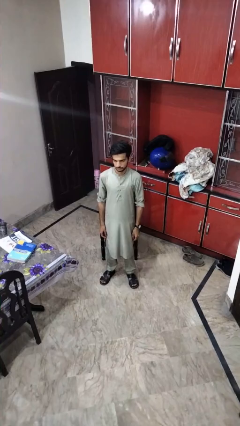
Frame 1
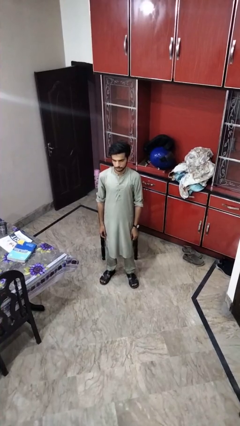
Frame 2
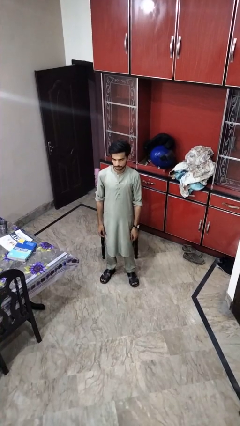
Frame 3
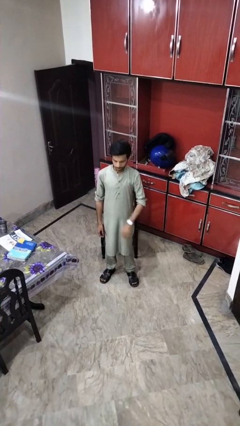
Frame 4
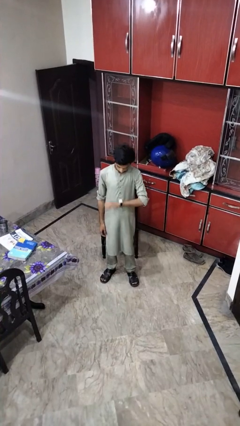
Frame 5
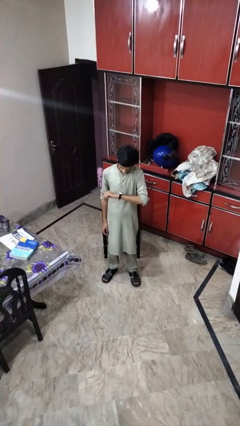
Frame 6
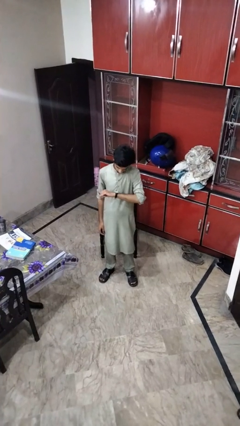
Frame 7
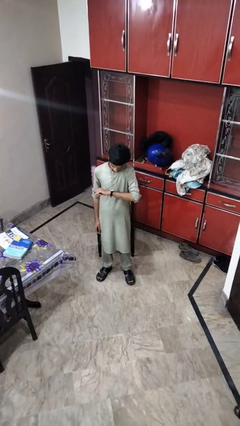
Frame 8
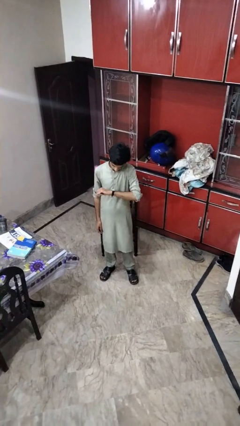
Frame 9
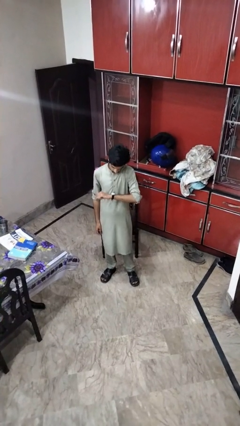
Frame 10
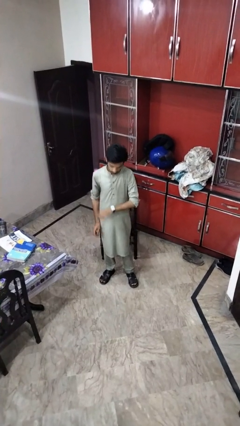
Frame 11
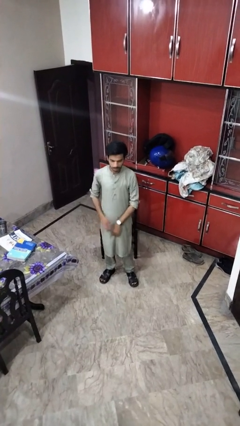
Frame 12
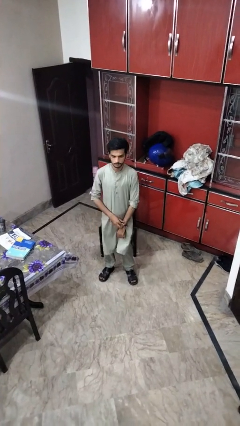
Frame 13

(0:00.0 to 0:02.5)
person looks at wristwatch

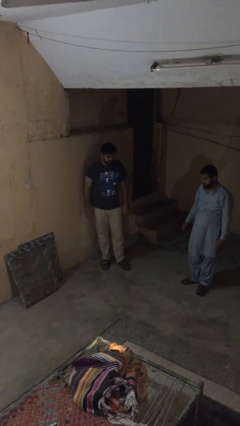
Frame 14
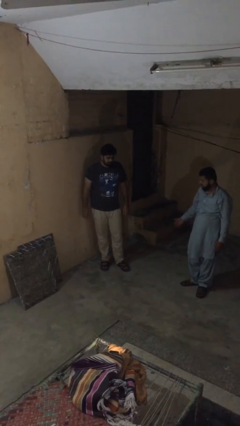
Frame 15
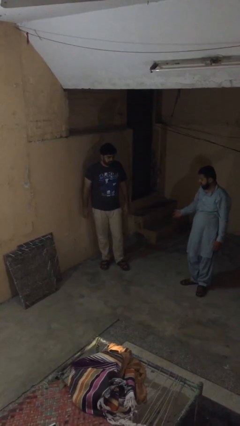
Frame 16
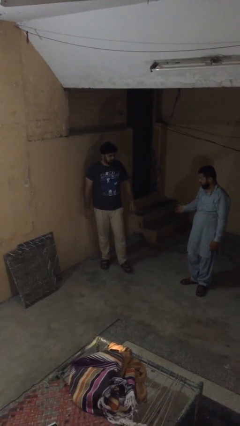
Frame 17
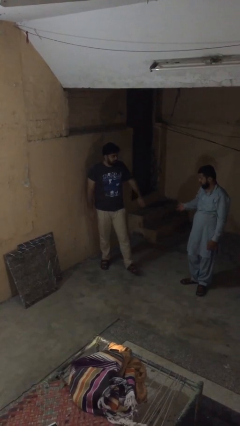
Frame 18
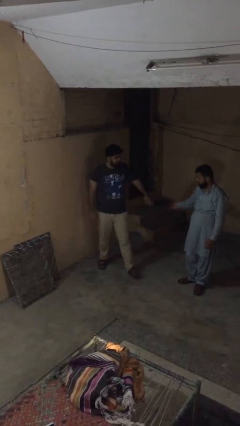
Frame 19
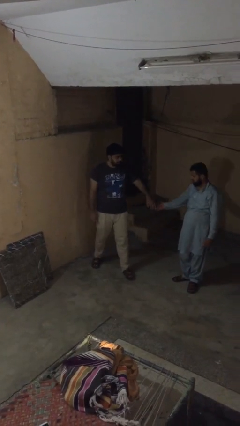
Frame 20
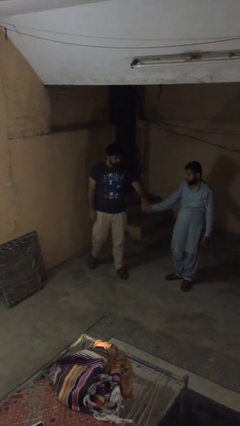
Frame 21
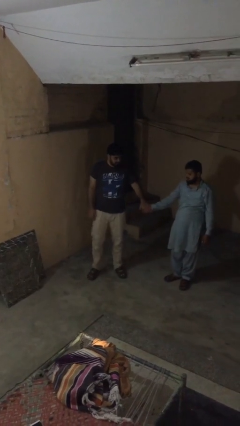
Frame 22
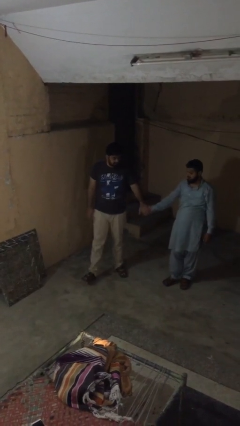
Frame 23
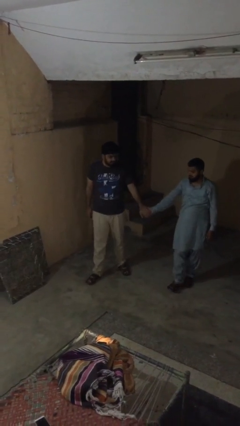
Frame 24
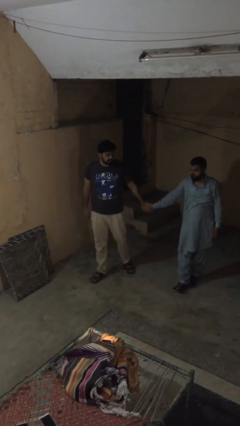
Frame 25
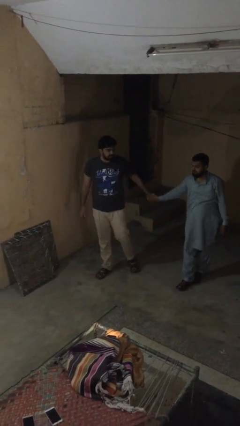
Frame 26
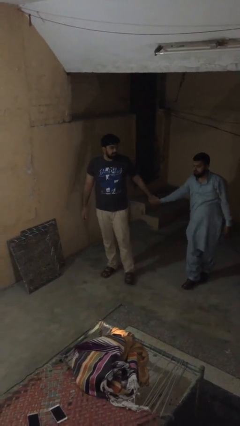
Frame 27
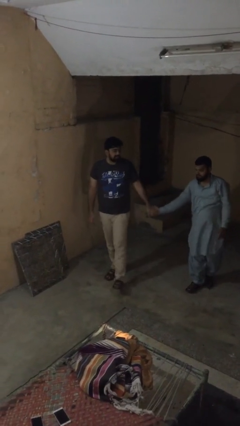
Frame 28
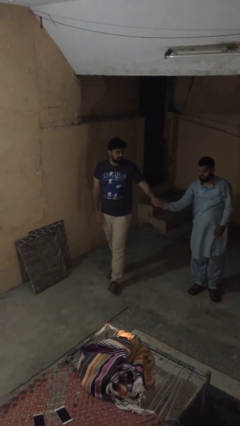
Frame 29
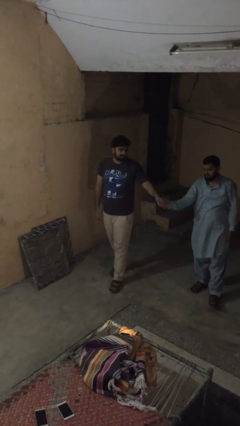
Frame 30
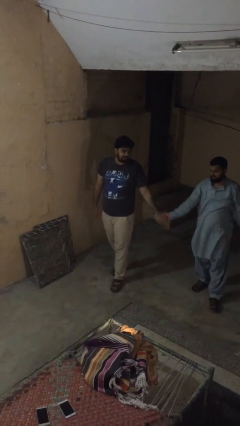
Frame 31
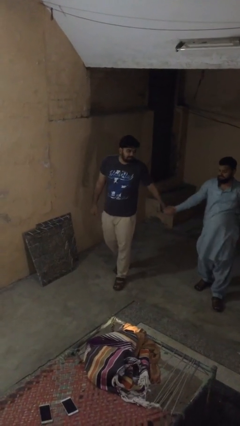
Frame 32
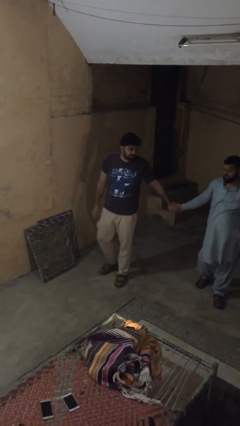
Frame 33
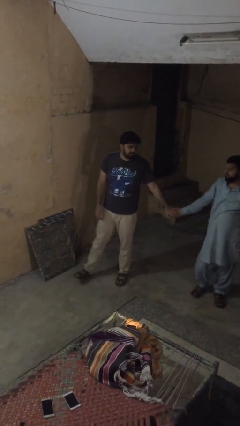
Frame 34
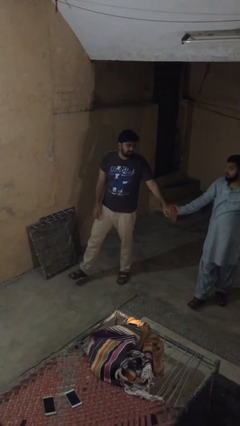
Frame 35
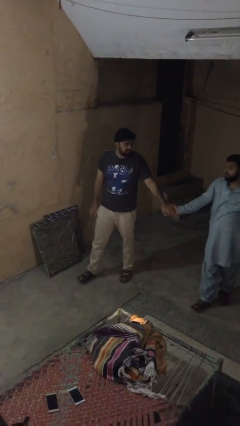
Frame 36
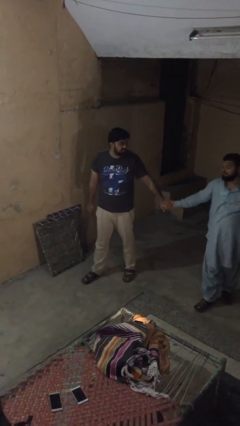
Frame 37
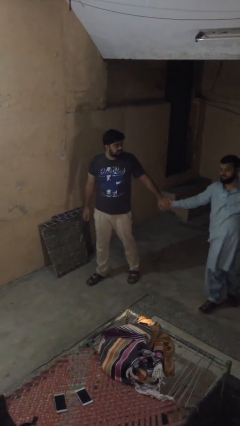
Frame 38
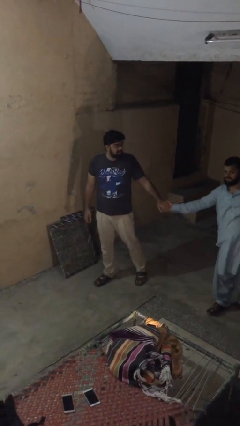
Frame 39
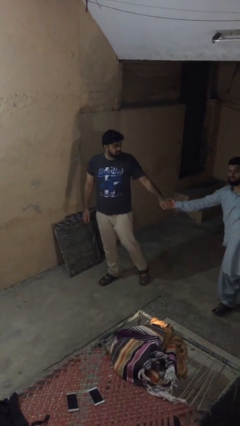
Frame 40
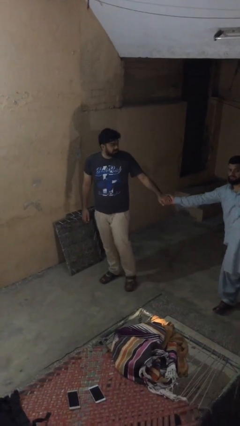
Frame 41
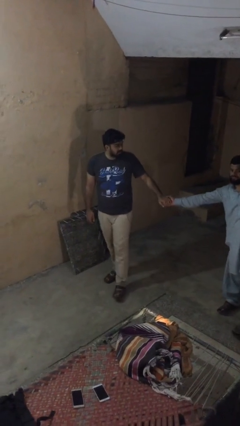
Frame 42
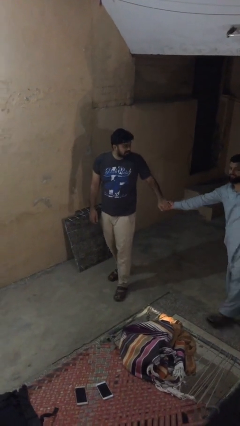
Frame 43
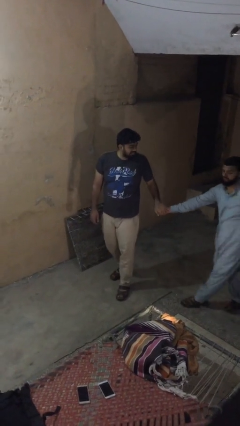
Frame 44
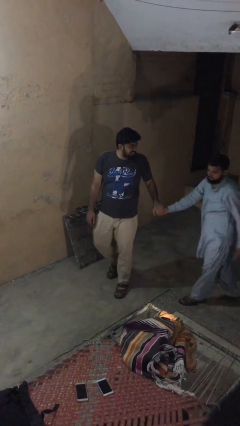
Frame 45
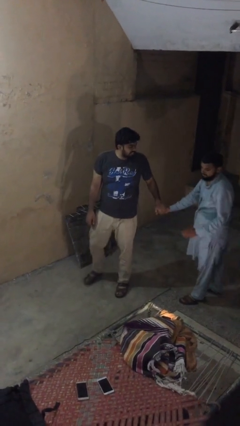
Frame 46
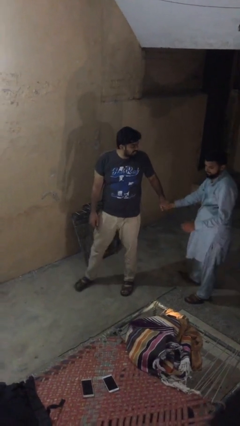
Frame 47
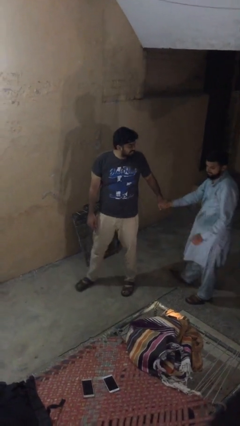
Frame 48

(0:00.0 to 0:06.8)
person holds hand

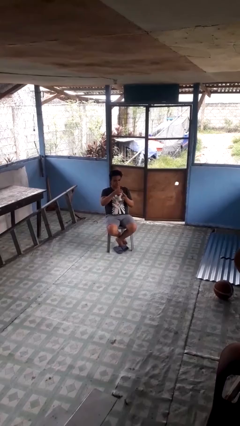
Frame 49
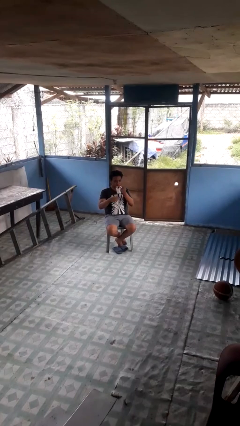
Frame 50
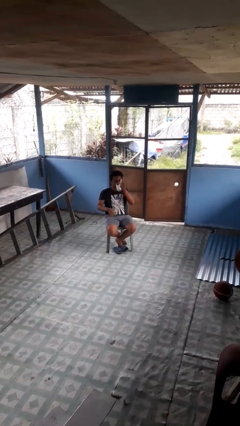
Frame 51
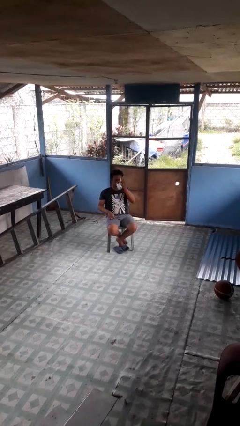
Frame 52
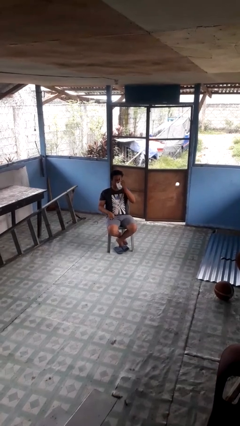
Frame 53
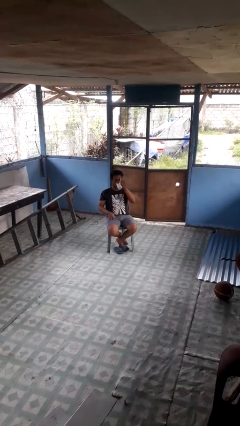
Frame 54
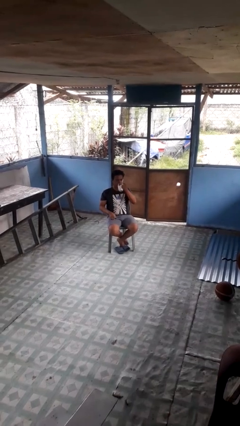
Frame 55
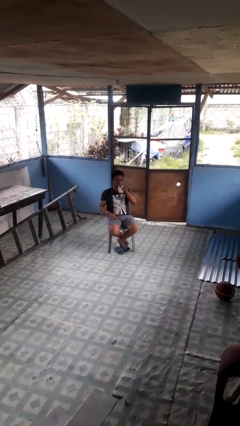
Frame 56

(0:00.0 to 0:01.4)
person drinks from mug

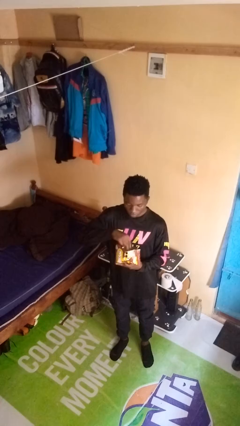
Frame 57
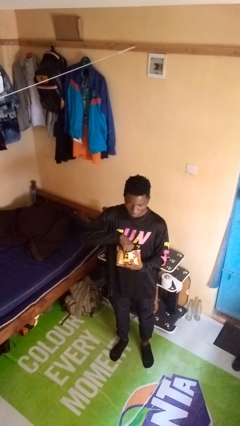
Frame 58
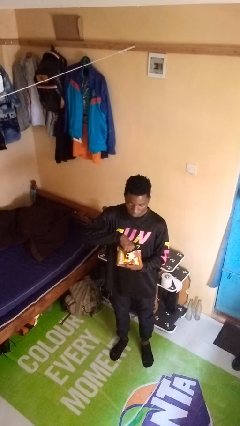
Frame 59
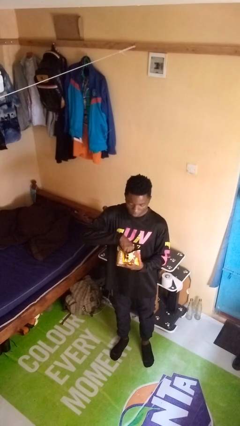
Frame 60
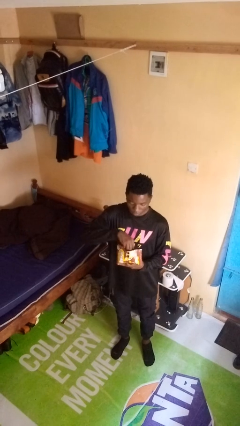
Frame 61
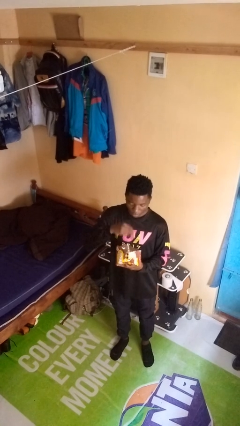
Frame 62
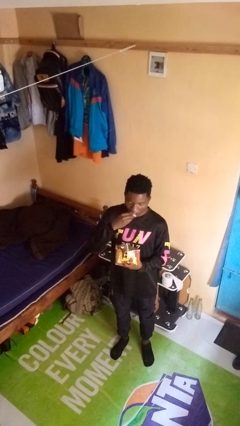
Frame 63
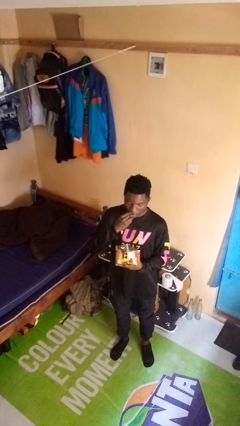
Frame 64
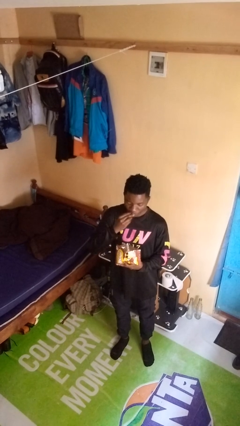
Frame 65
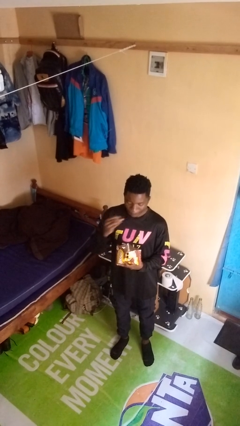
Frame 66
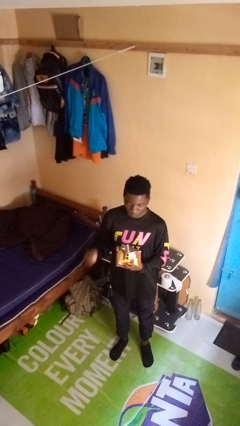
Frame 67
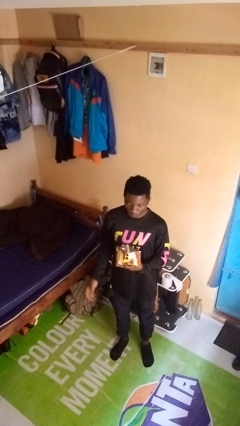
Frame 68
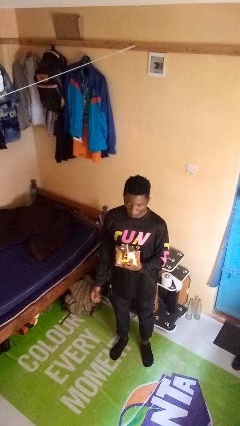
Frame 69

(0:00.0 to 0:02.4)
person eats snack from bag

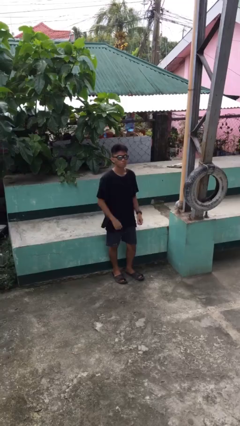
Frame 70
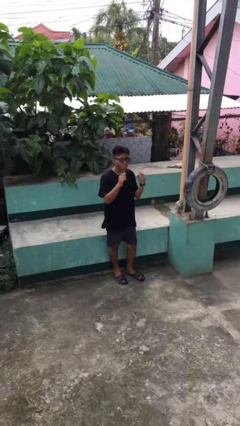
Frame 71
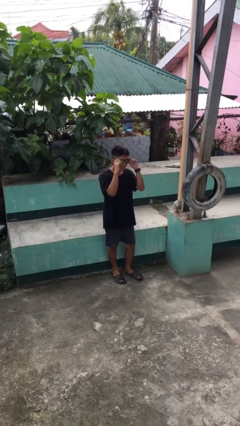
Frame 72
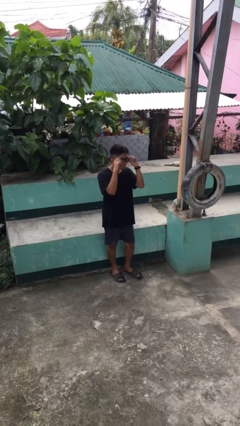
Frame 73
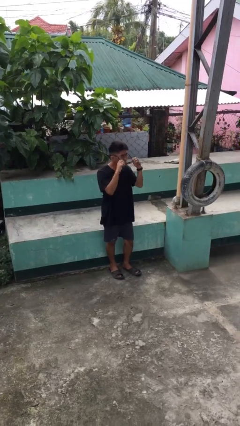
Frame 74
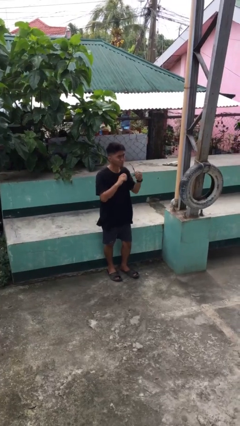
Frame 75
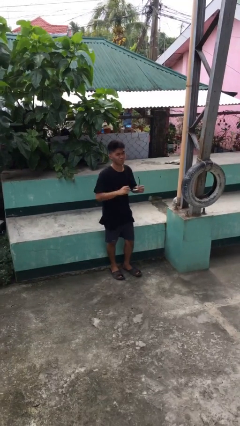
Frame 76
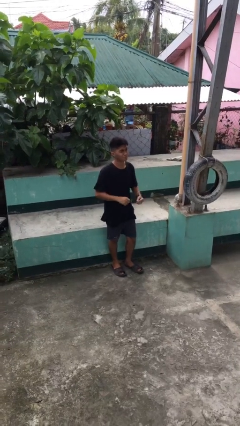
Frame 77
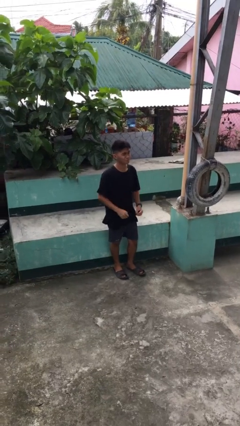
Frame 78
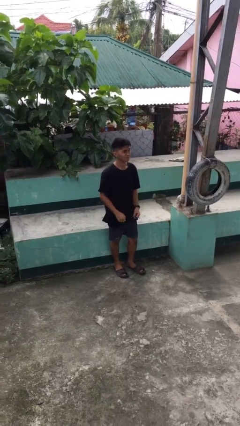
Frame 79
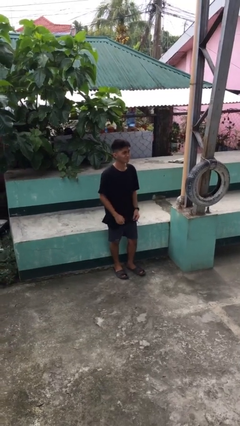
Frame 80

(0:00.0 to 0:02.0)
person takes off sunglasses

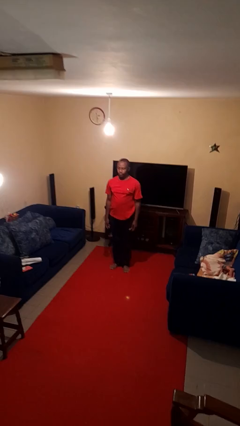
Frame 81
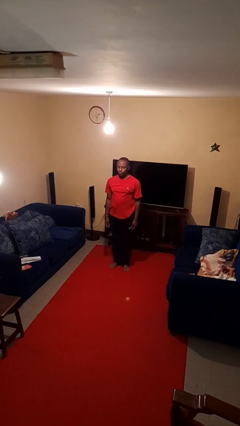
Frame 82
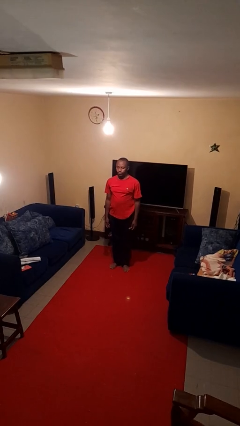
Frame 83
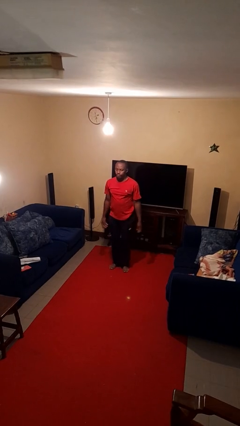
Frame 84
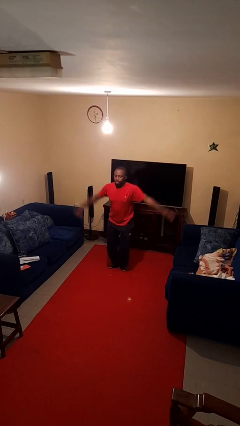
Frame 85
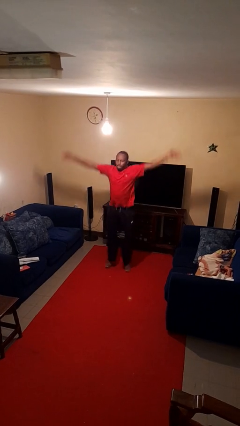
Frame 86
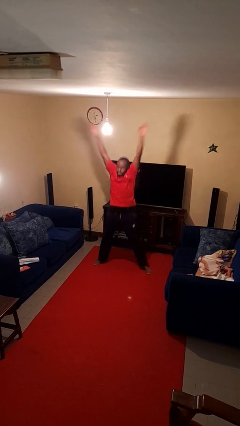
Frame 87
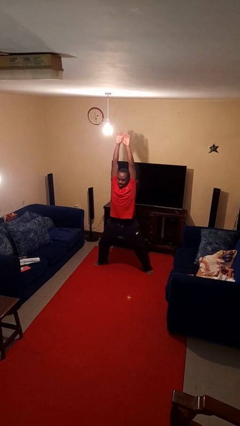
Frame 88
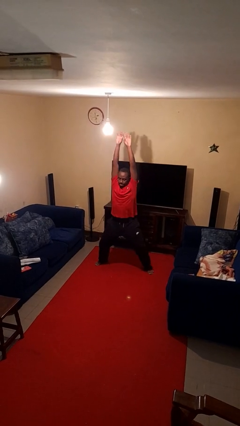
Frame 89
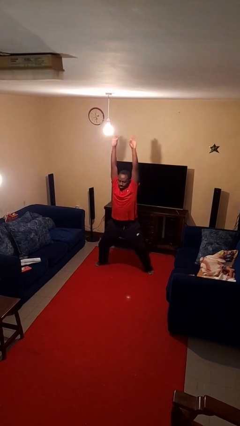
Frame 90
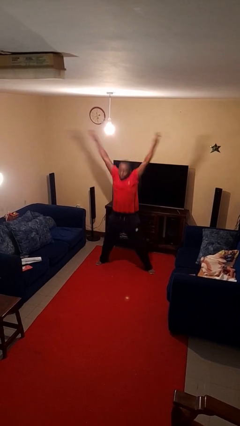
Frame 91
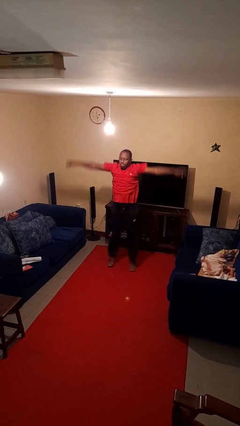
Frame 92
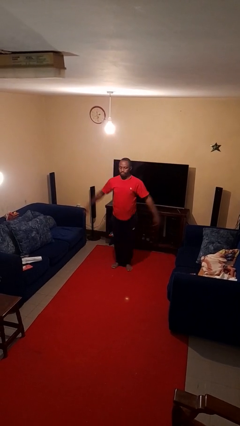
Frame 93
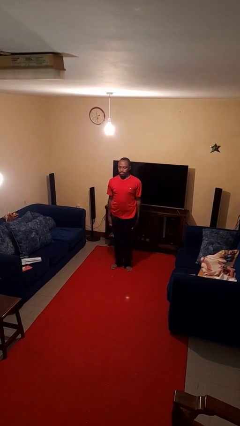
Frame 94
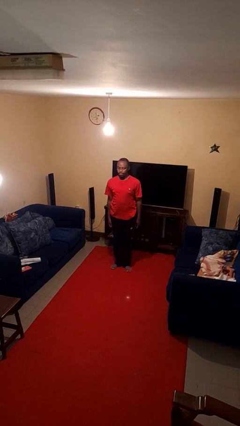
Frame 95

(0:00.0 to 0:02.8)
person exercises with jumping jacks
